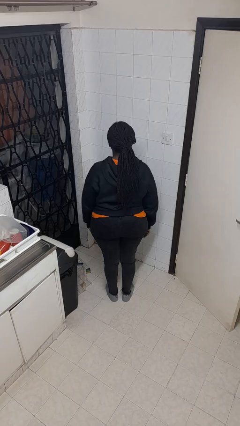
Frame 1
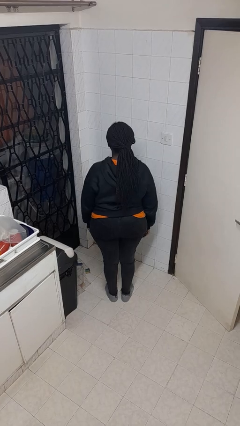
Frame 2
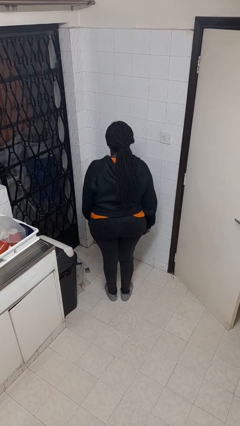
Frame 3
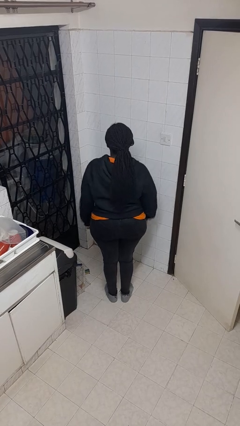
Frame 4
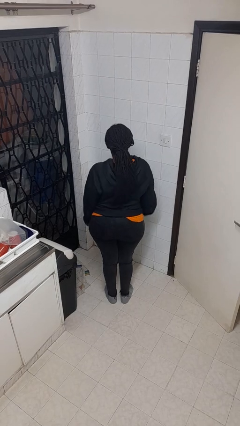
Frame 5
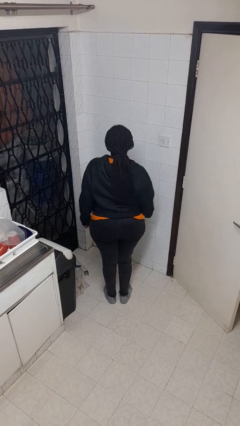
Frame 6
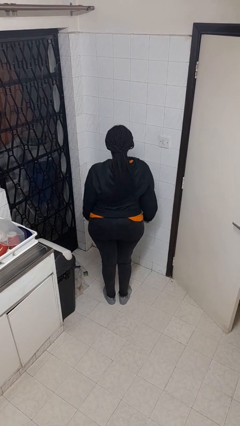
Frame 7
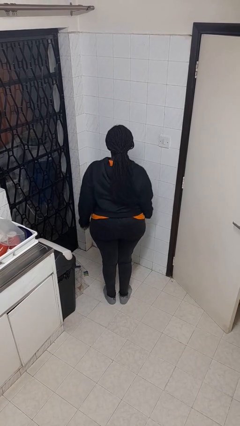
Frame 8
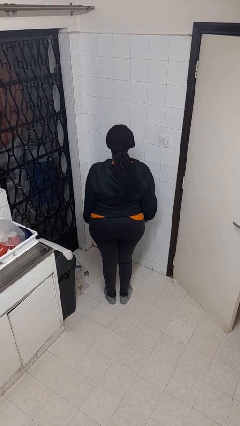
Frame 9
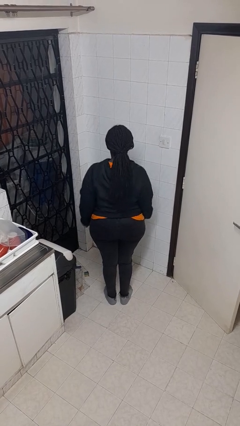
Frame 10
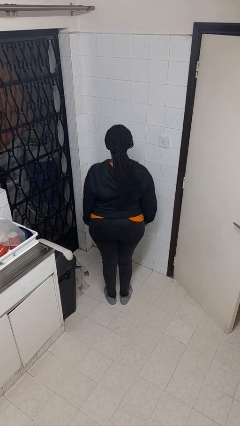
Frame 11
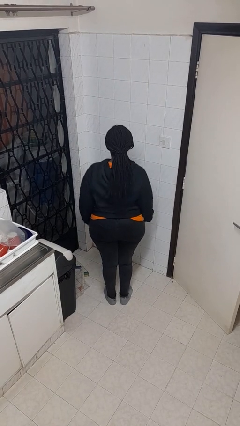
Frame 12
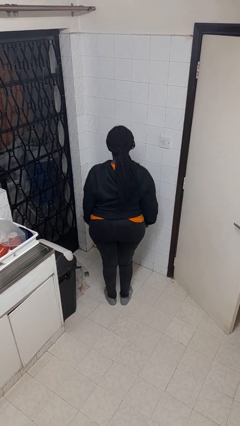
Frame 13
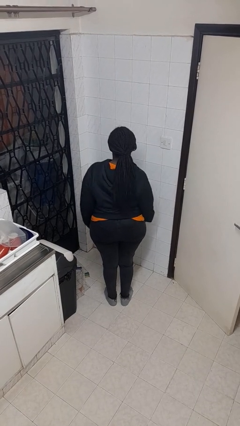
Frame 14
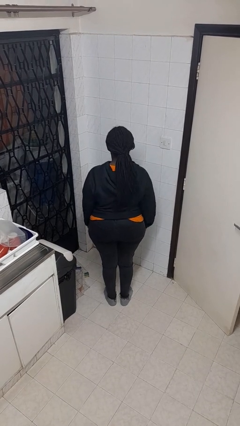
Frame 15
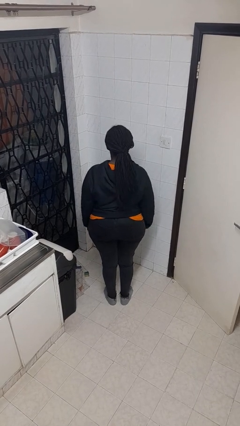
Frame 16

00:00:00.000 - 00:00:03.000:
person dances in place

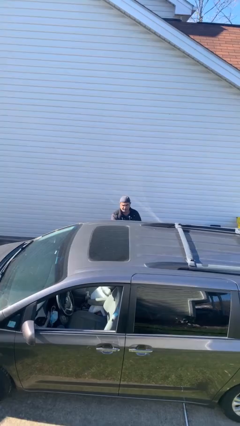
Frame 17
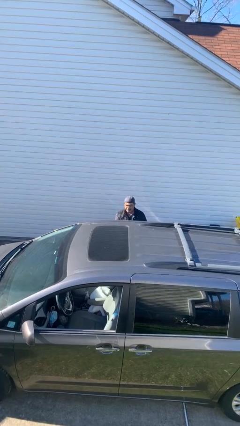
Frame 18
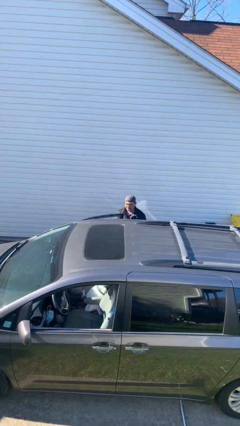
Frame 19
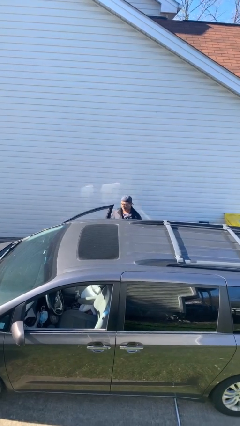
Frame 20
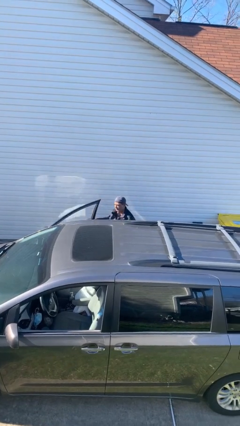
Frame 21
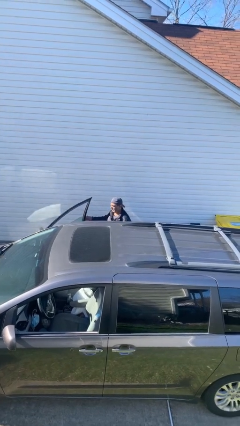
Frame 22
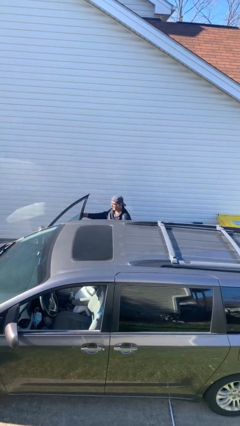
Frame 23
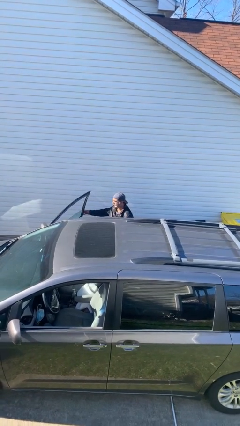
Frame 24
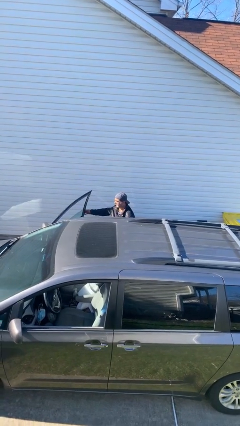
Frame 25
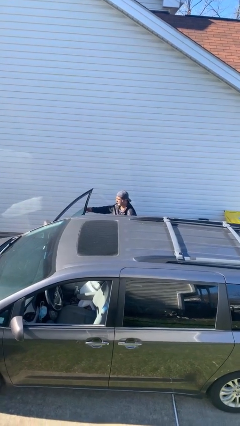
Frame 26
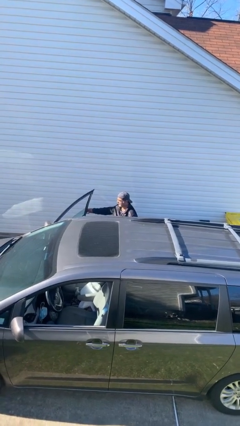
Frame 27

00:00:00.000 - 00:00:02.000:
person opens car door

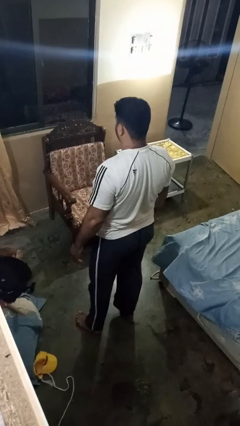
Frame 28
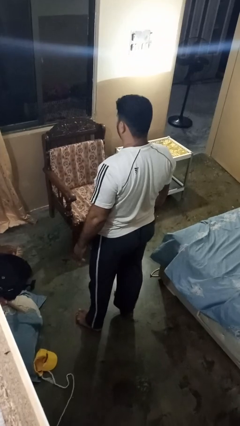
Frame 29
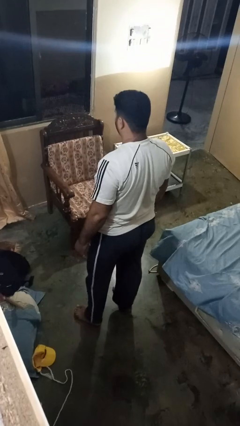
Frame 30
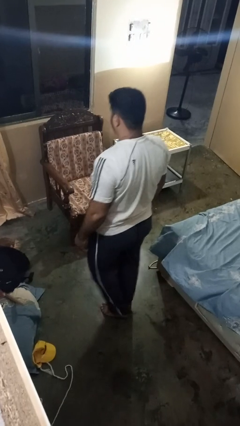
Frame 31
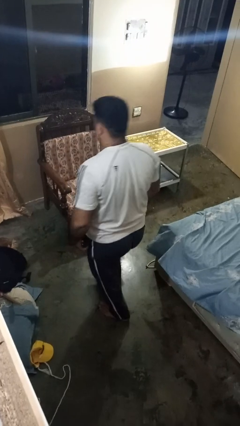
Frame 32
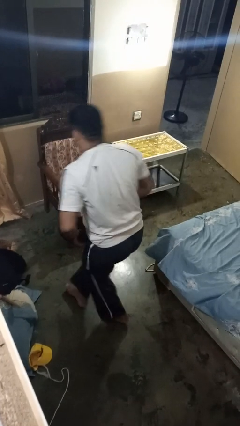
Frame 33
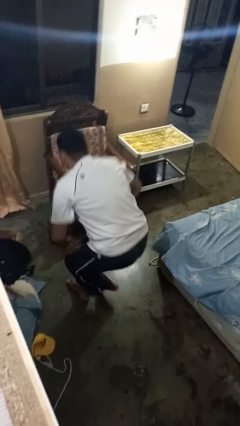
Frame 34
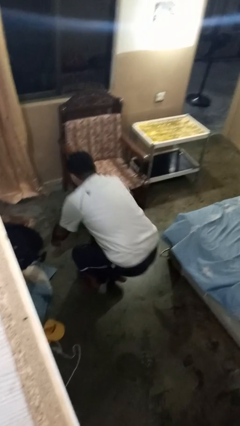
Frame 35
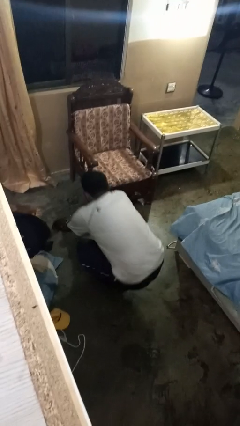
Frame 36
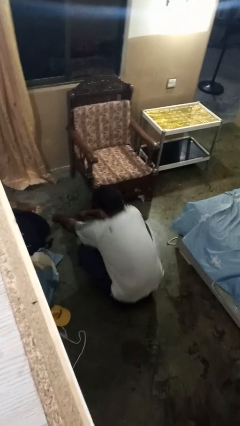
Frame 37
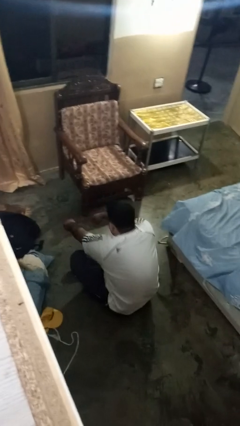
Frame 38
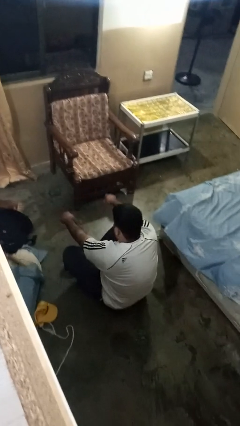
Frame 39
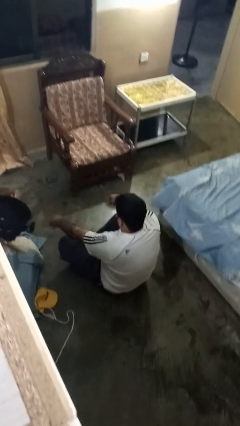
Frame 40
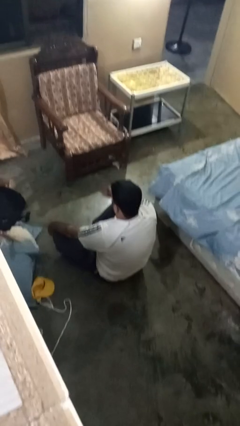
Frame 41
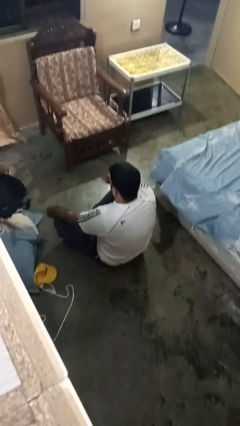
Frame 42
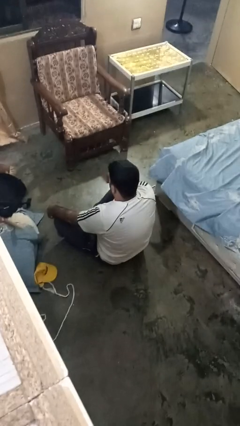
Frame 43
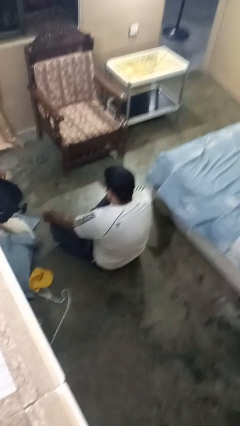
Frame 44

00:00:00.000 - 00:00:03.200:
person crosses legs

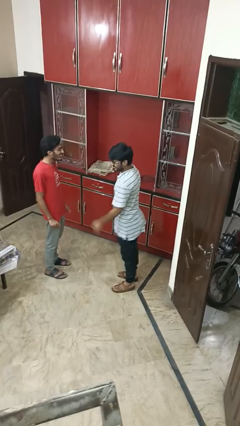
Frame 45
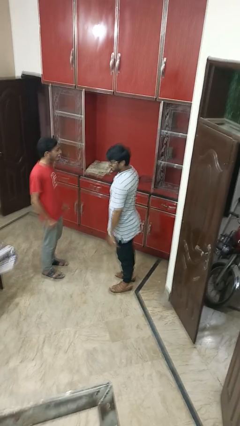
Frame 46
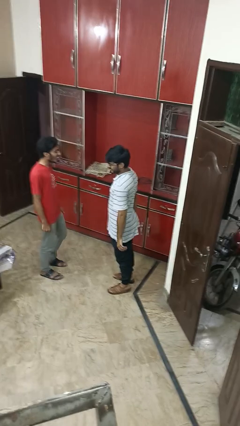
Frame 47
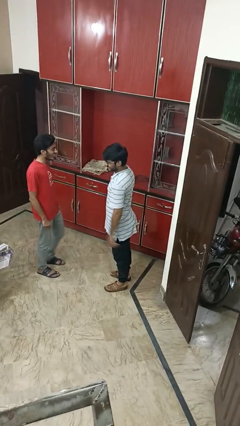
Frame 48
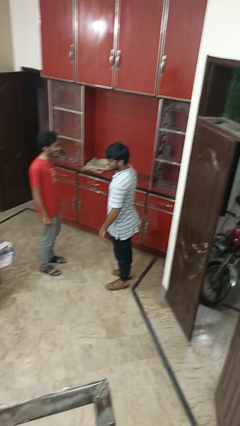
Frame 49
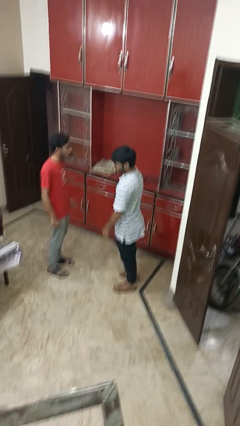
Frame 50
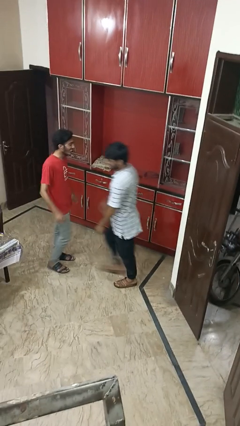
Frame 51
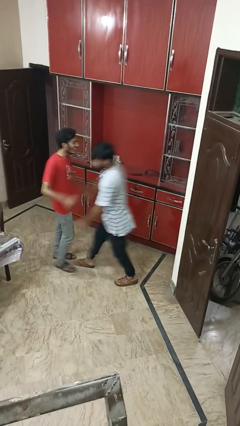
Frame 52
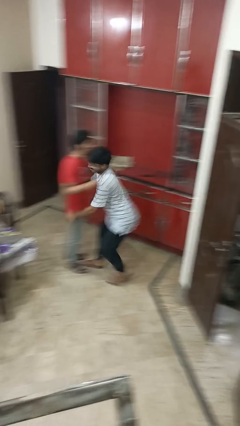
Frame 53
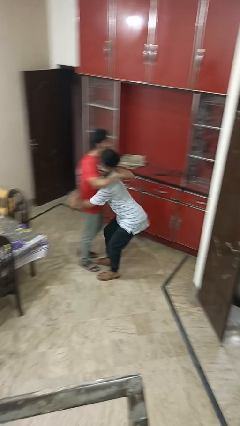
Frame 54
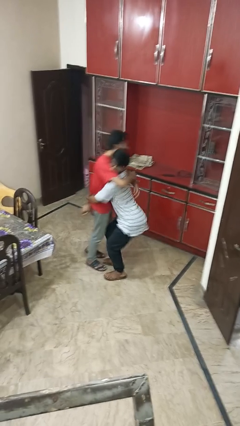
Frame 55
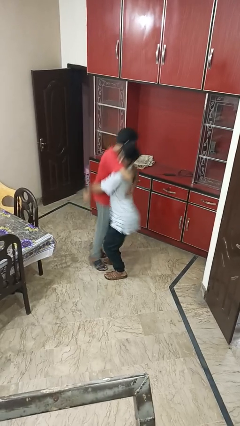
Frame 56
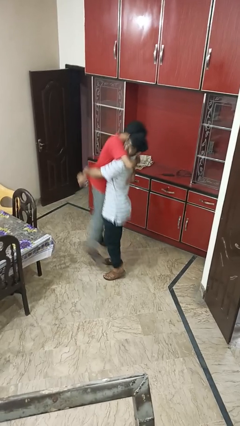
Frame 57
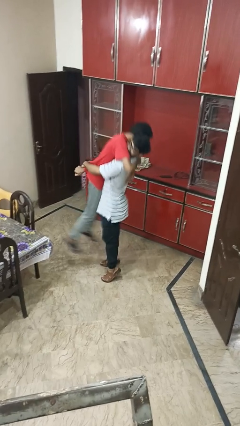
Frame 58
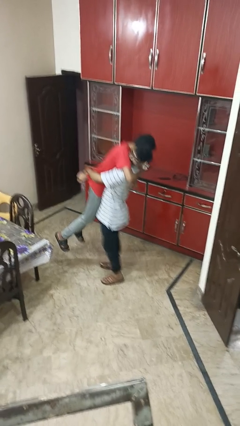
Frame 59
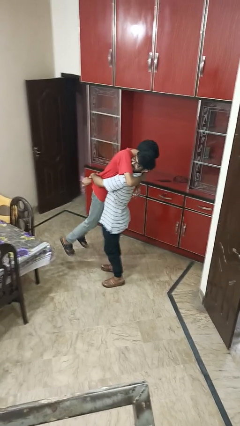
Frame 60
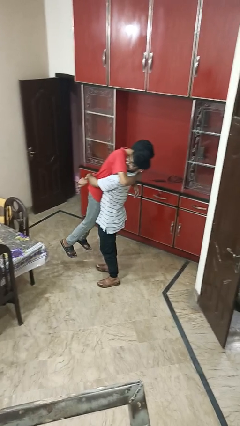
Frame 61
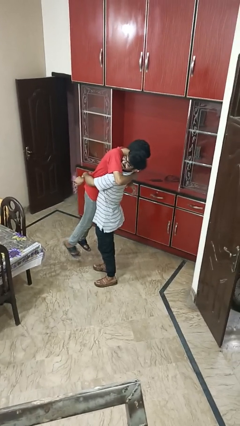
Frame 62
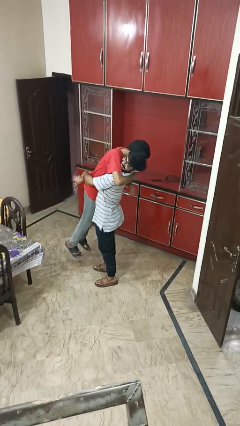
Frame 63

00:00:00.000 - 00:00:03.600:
person picks up person

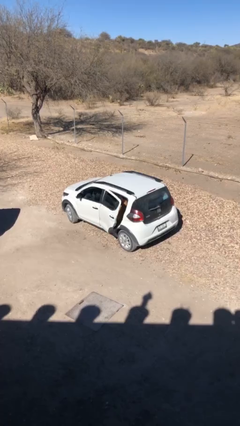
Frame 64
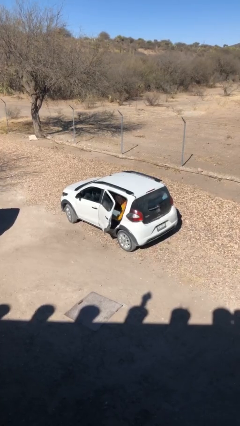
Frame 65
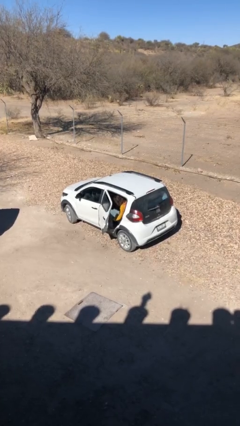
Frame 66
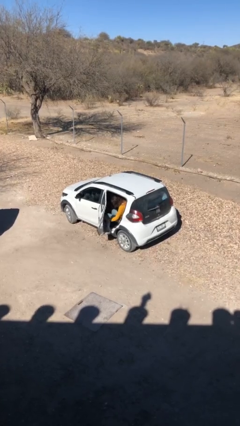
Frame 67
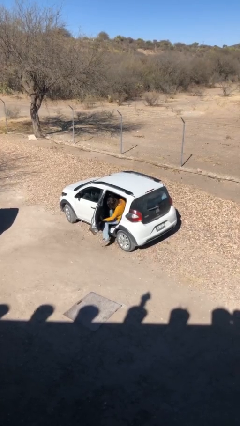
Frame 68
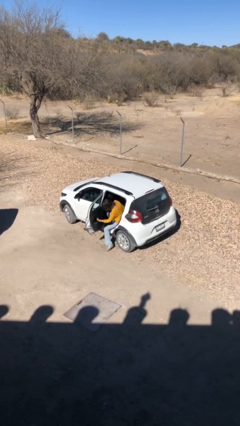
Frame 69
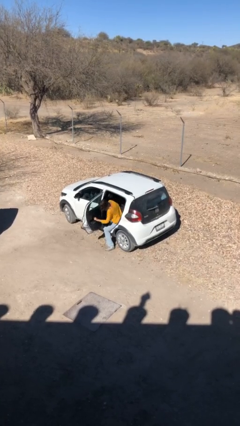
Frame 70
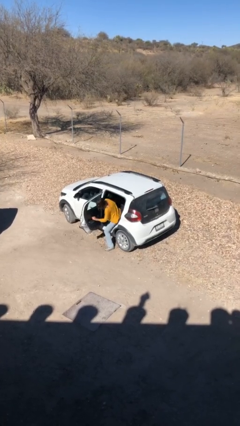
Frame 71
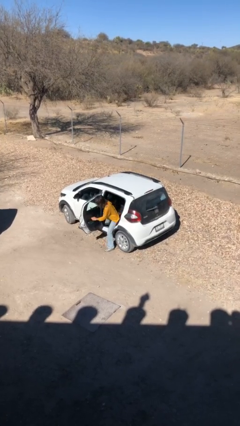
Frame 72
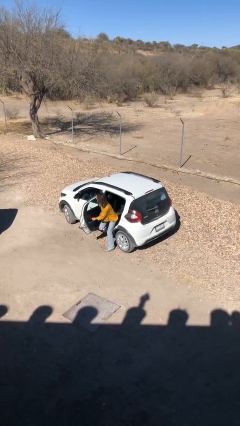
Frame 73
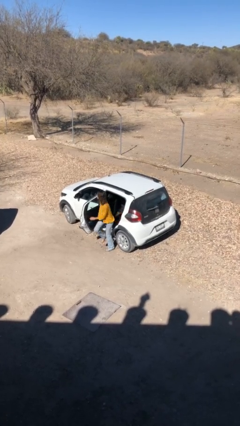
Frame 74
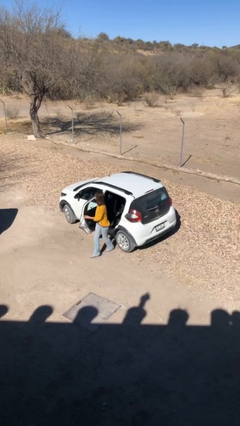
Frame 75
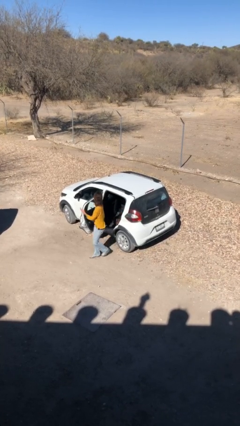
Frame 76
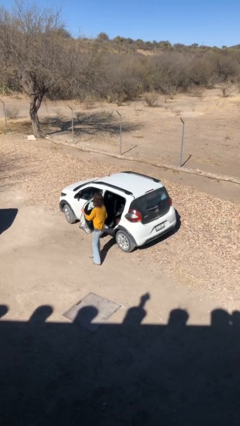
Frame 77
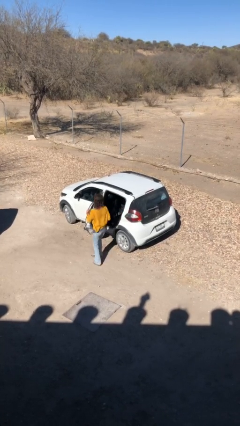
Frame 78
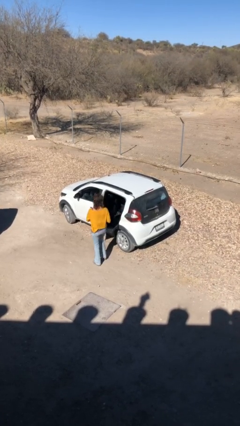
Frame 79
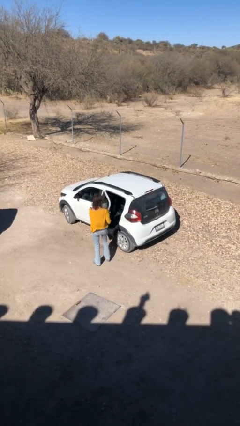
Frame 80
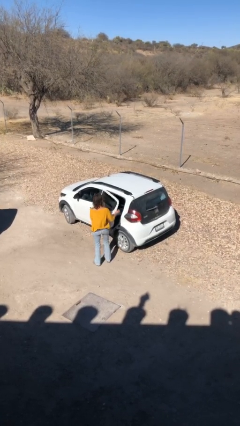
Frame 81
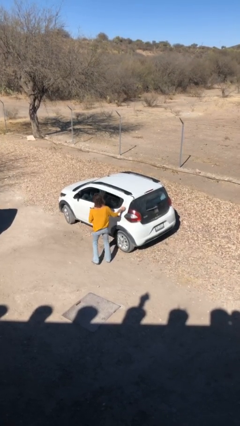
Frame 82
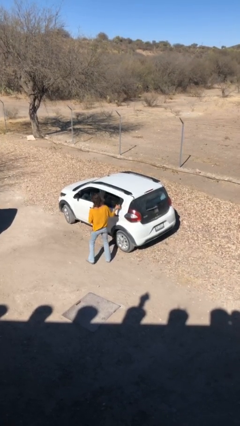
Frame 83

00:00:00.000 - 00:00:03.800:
car drops off person

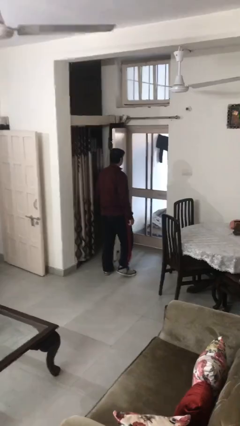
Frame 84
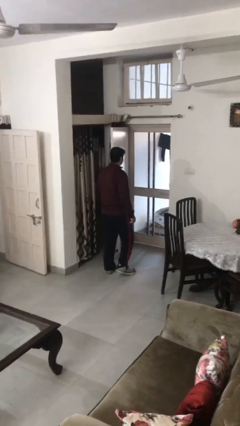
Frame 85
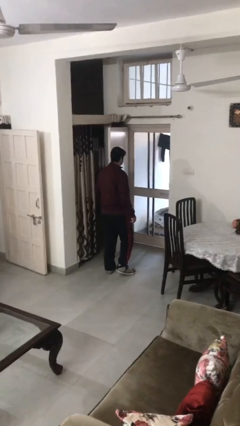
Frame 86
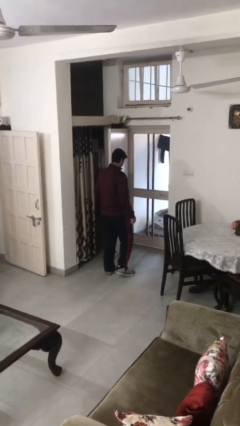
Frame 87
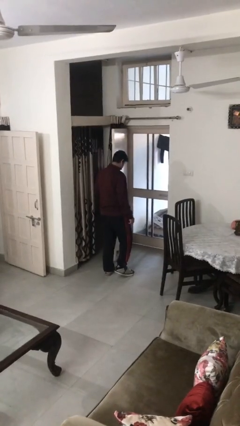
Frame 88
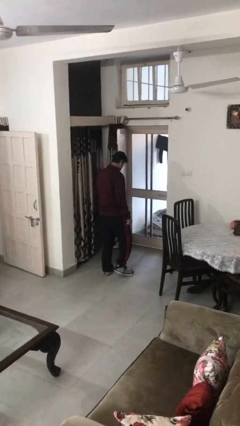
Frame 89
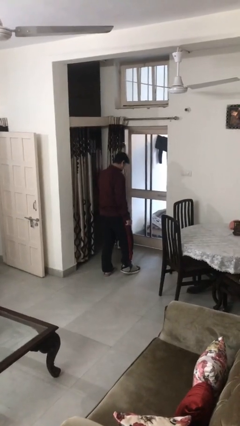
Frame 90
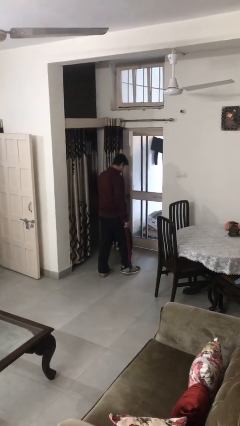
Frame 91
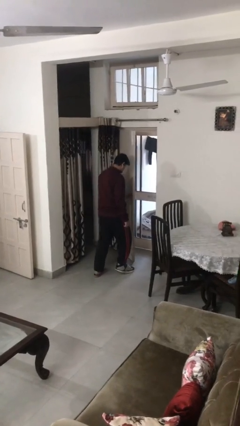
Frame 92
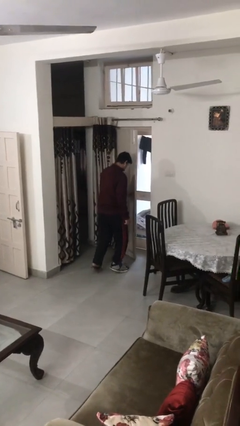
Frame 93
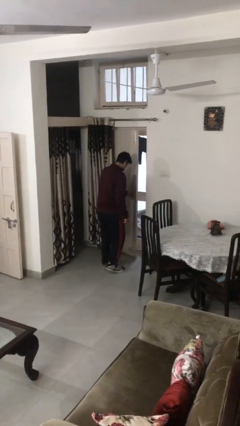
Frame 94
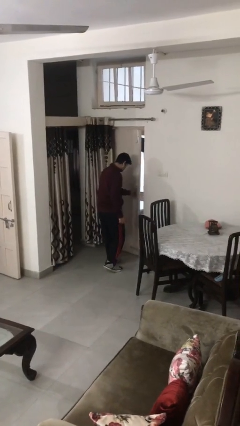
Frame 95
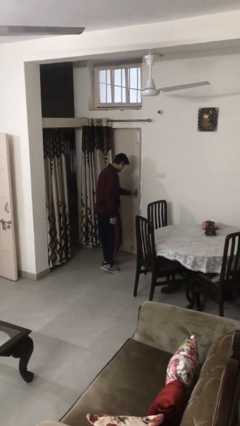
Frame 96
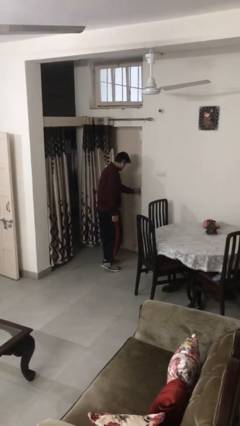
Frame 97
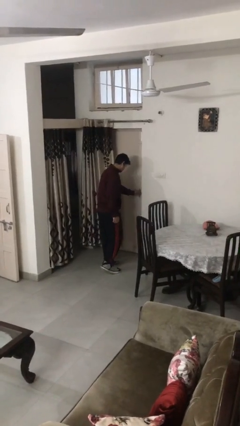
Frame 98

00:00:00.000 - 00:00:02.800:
person closes facility door
